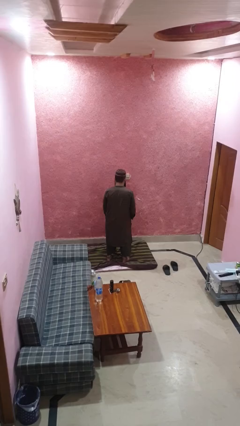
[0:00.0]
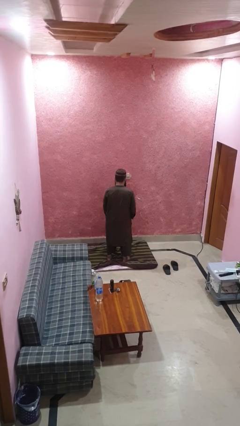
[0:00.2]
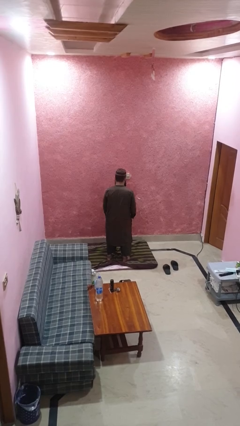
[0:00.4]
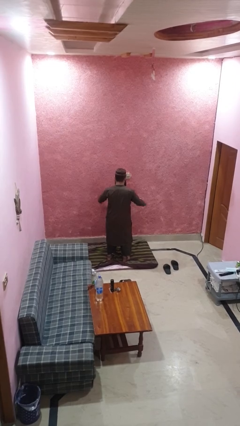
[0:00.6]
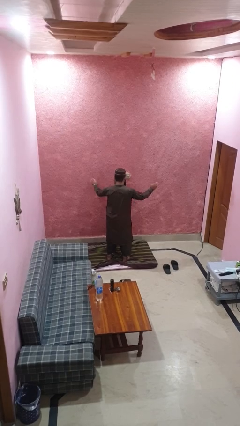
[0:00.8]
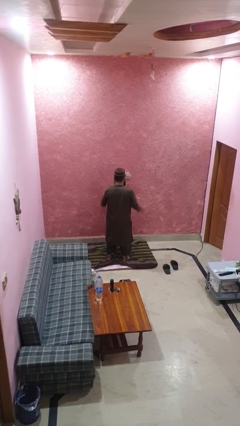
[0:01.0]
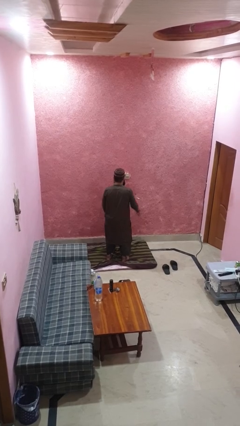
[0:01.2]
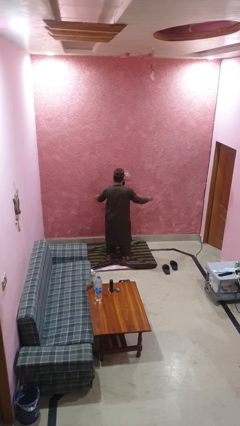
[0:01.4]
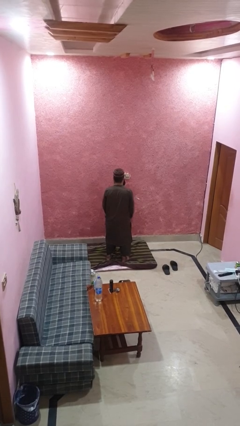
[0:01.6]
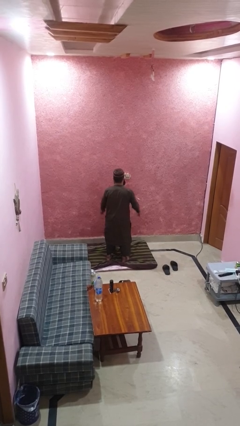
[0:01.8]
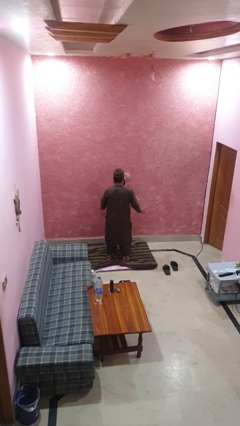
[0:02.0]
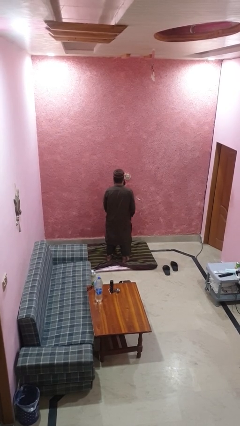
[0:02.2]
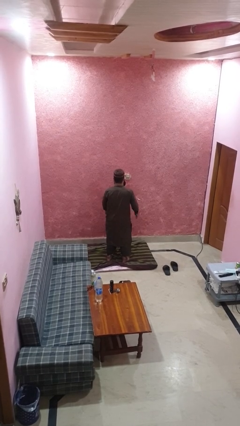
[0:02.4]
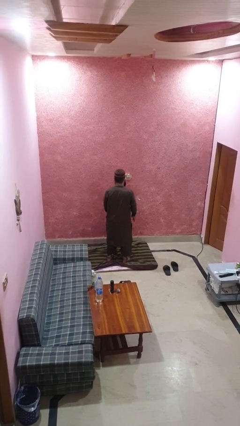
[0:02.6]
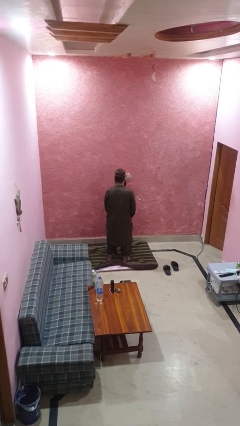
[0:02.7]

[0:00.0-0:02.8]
person slaps hands on thighs

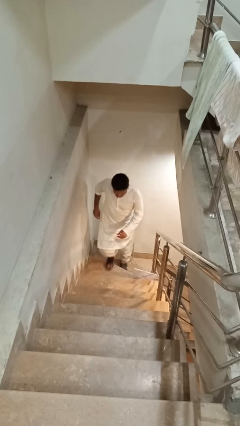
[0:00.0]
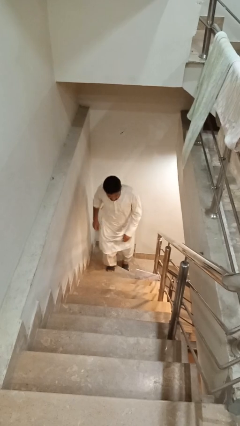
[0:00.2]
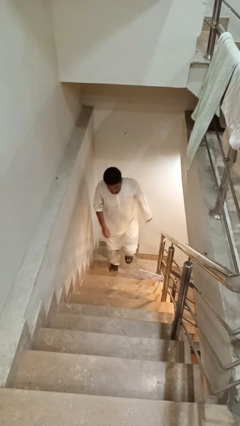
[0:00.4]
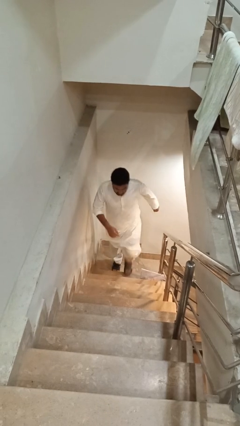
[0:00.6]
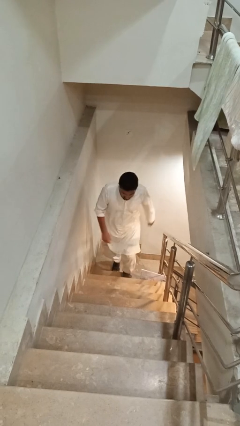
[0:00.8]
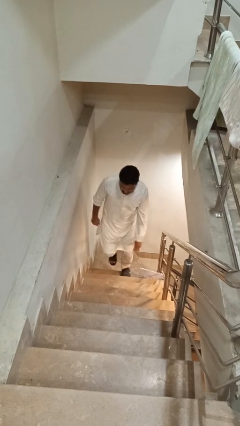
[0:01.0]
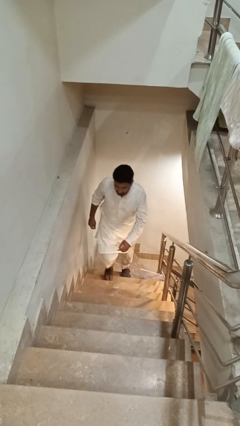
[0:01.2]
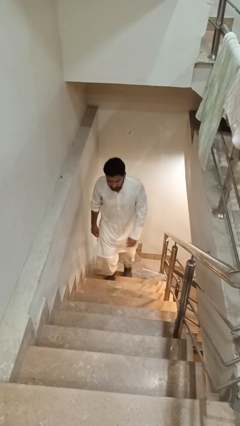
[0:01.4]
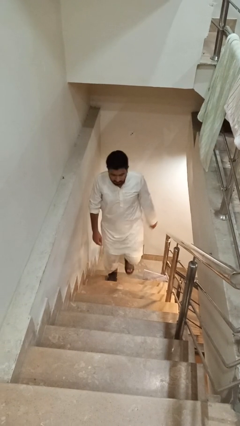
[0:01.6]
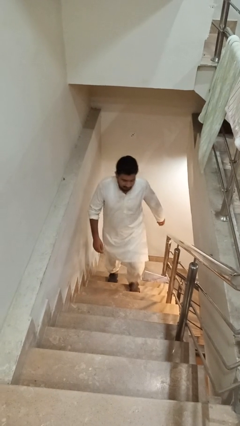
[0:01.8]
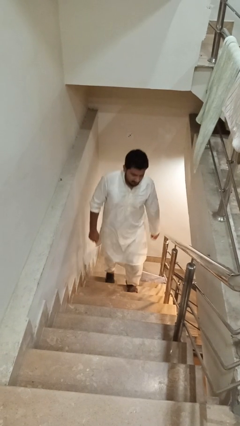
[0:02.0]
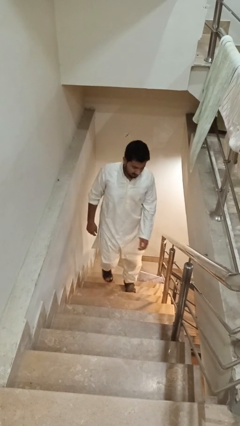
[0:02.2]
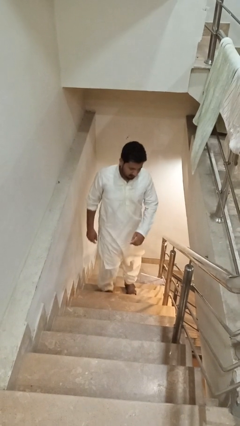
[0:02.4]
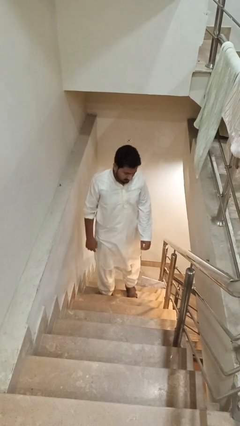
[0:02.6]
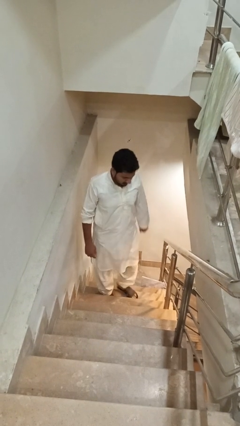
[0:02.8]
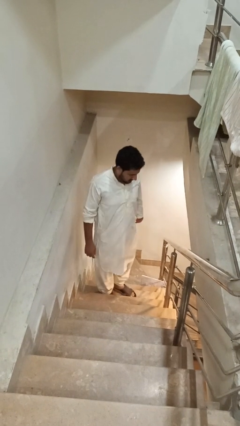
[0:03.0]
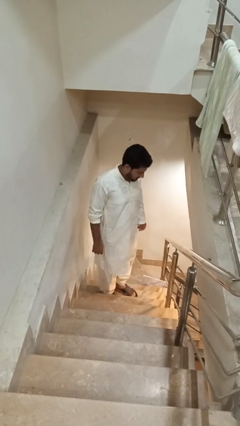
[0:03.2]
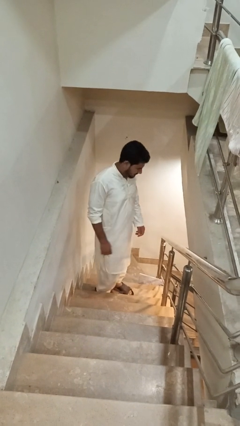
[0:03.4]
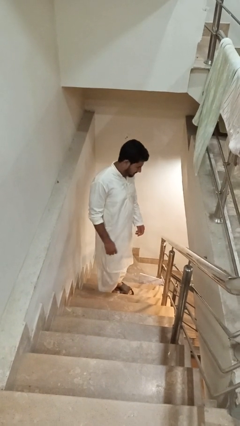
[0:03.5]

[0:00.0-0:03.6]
person climbs up stairs

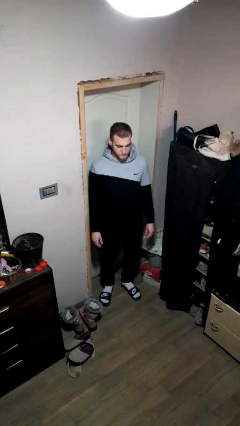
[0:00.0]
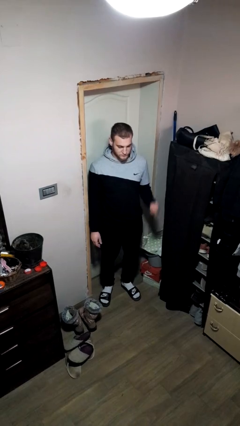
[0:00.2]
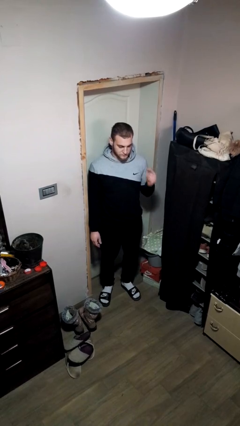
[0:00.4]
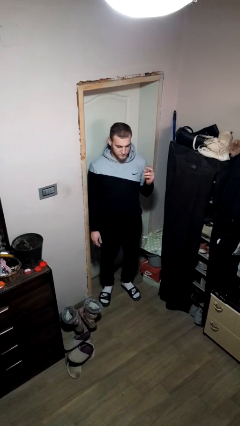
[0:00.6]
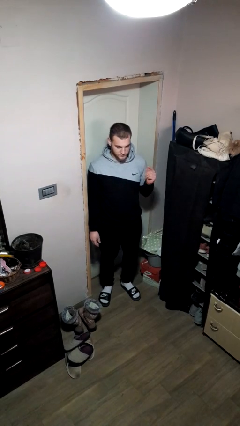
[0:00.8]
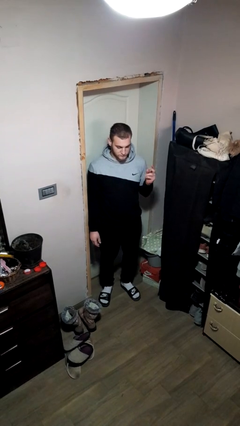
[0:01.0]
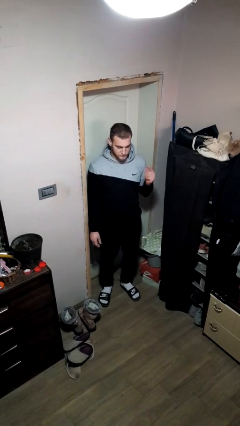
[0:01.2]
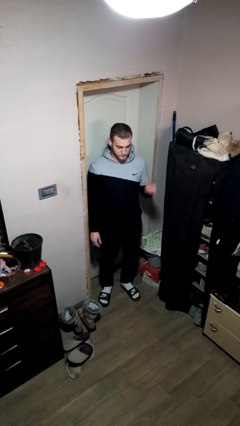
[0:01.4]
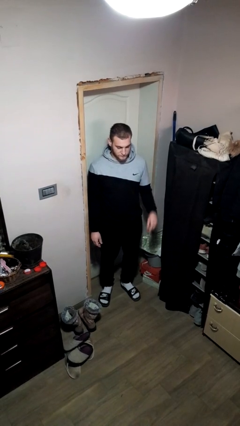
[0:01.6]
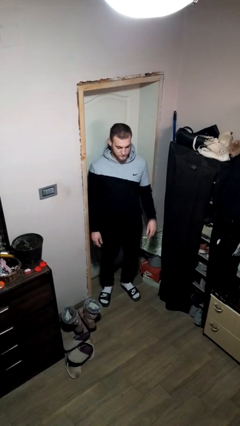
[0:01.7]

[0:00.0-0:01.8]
person snaps fingers

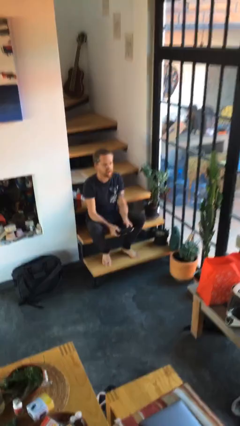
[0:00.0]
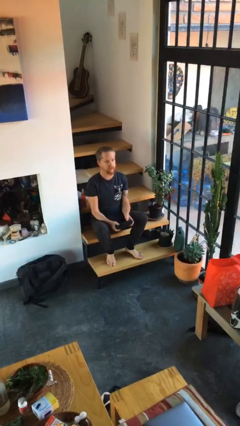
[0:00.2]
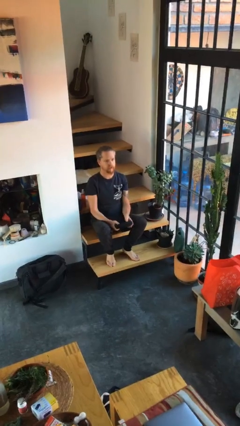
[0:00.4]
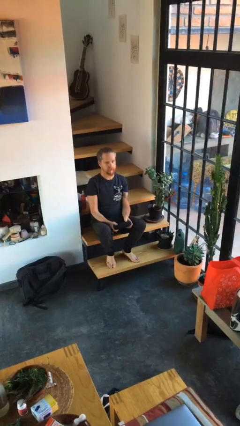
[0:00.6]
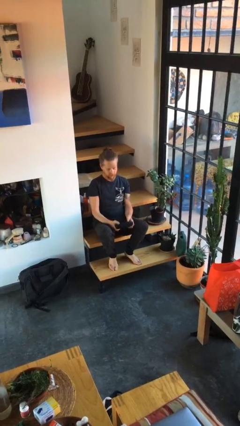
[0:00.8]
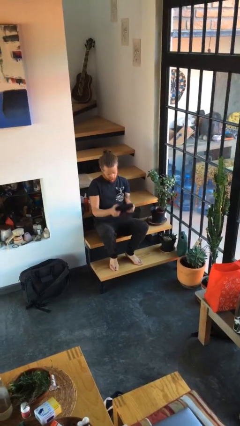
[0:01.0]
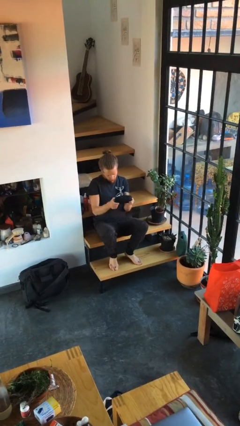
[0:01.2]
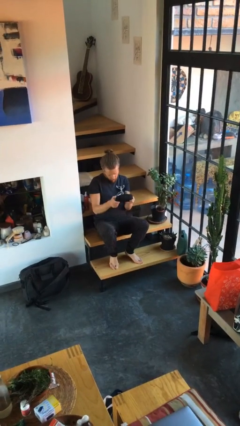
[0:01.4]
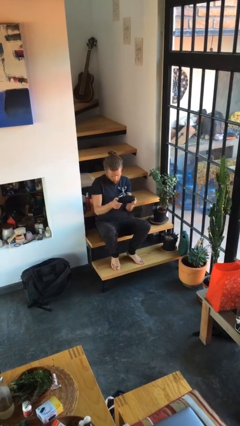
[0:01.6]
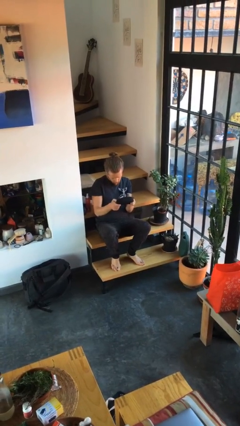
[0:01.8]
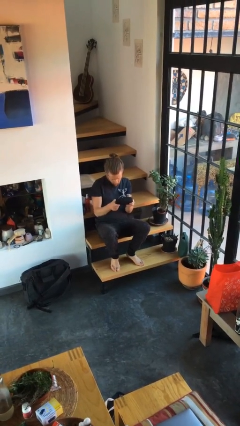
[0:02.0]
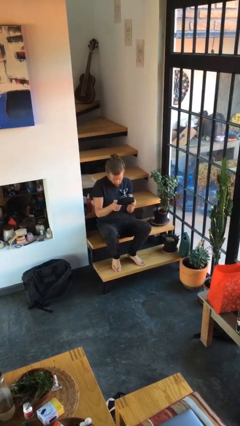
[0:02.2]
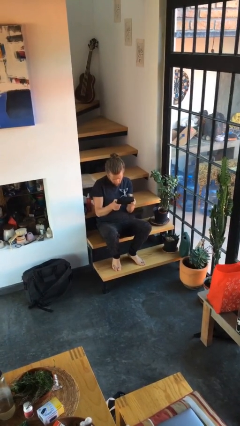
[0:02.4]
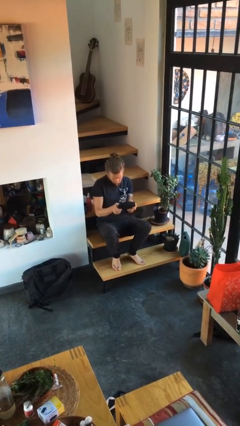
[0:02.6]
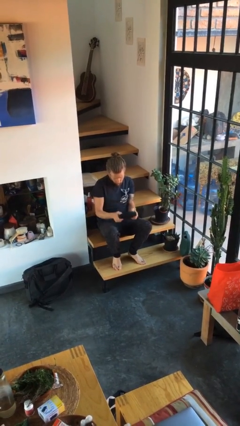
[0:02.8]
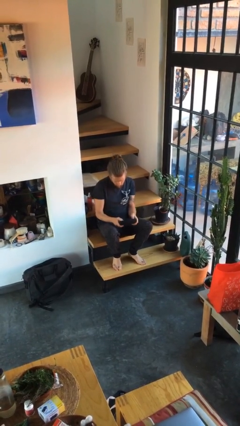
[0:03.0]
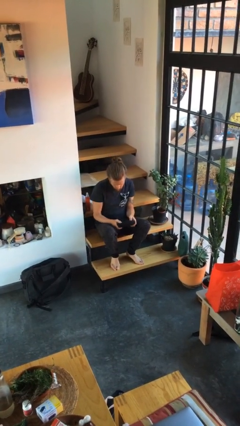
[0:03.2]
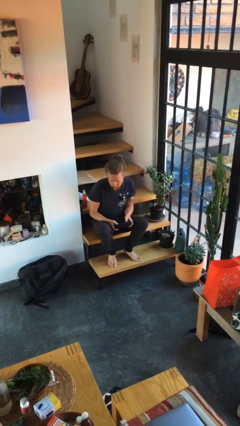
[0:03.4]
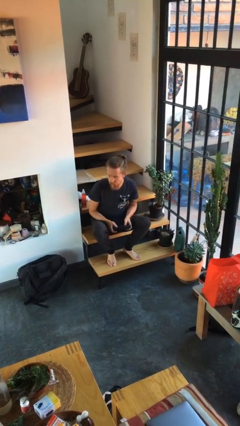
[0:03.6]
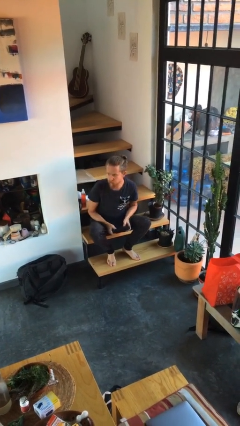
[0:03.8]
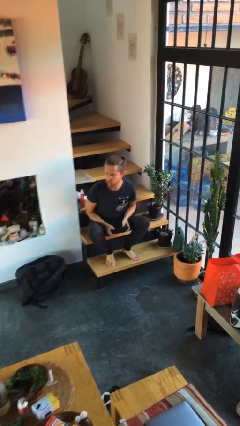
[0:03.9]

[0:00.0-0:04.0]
person interacts with handheld game

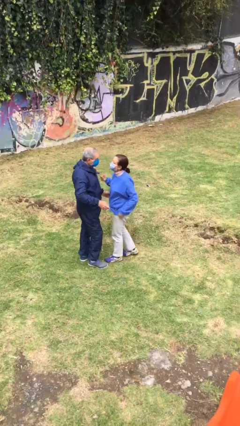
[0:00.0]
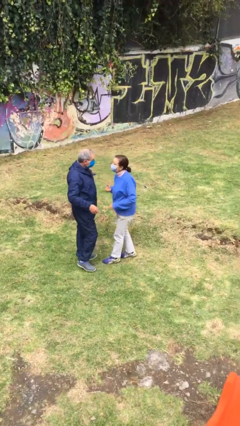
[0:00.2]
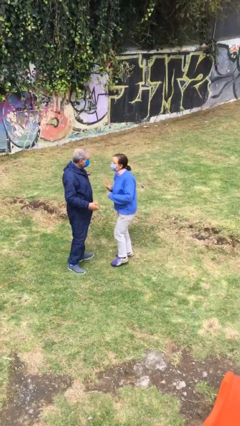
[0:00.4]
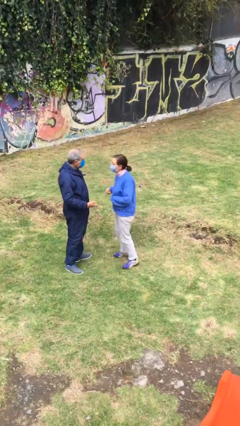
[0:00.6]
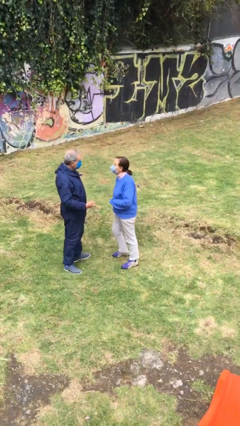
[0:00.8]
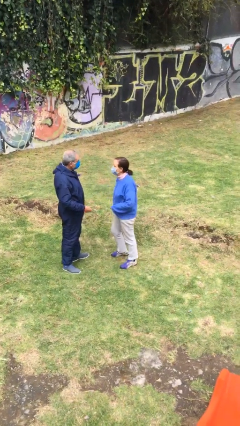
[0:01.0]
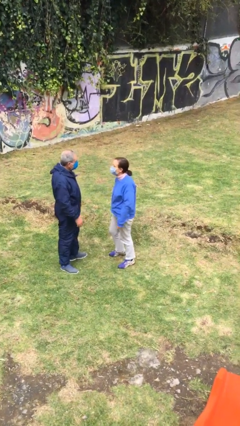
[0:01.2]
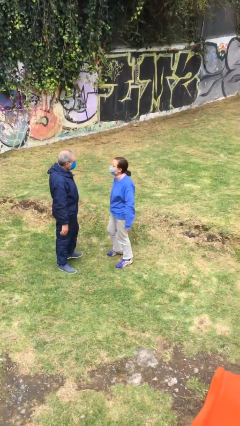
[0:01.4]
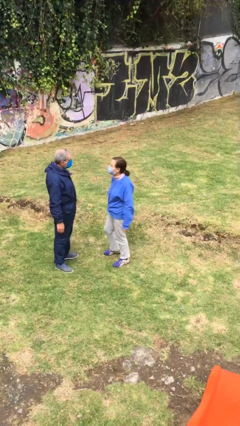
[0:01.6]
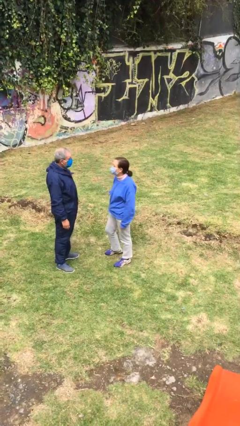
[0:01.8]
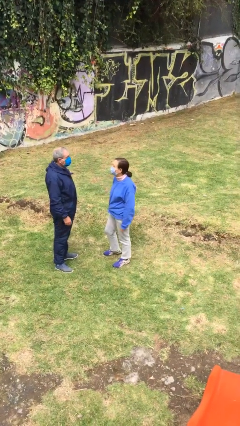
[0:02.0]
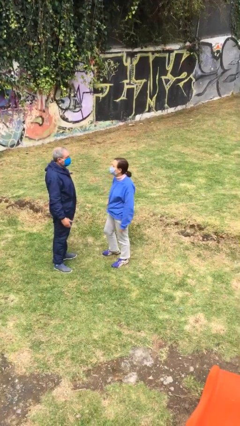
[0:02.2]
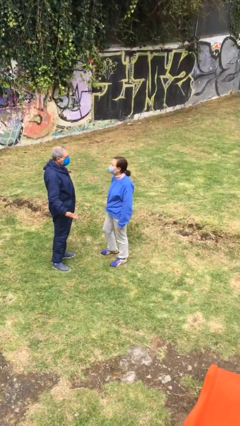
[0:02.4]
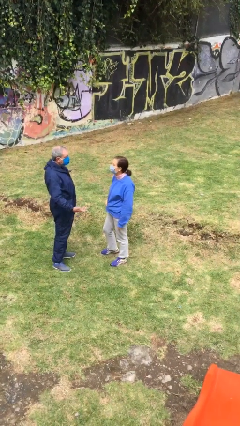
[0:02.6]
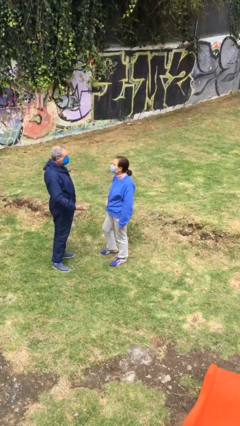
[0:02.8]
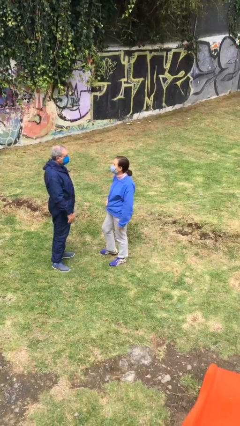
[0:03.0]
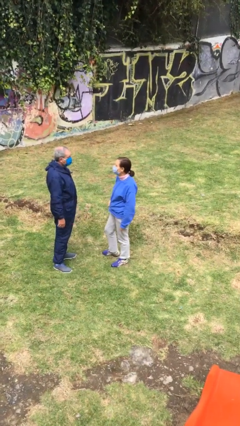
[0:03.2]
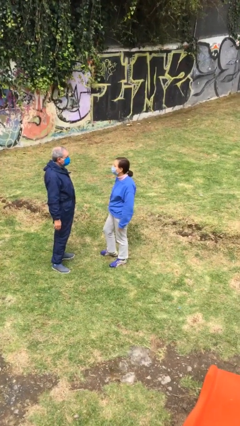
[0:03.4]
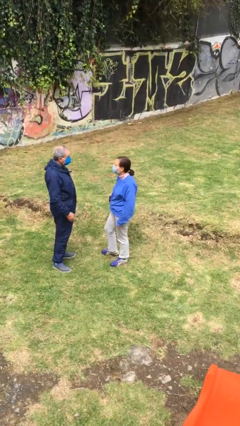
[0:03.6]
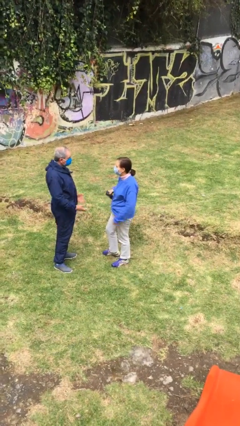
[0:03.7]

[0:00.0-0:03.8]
person talks to person

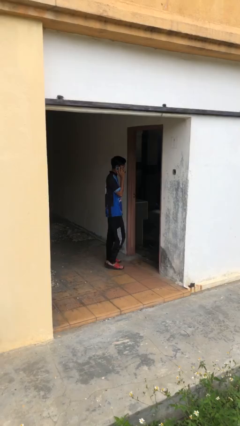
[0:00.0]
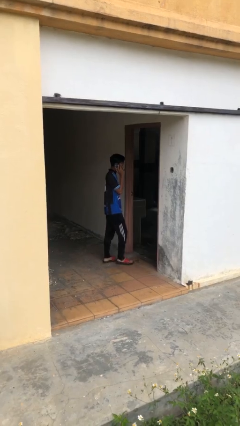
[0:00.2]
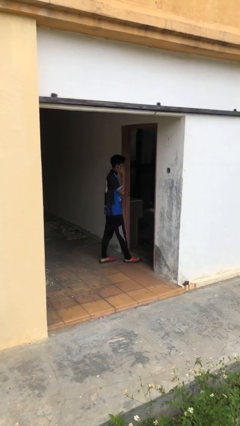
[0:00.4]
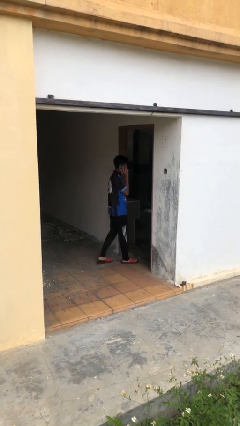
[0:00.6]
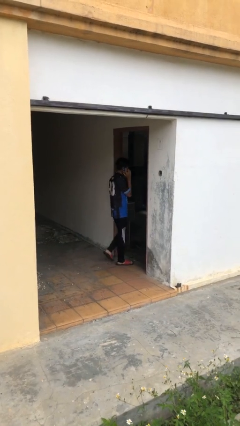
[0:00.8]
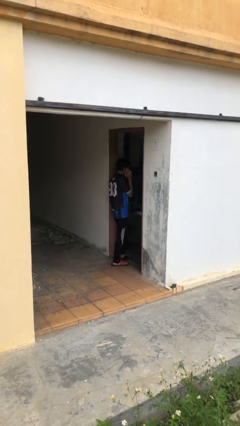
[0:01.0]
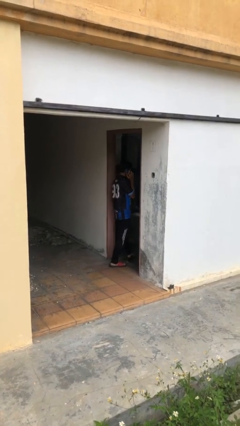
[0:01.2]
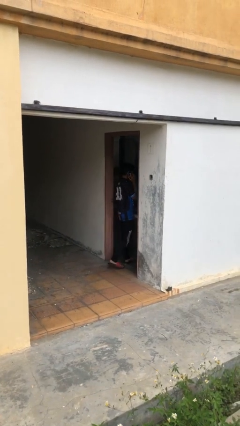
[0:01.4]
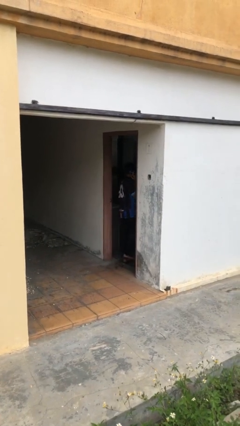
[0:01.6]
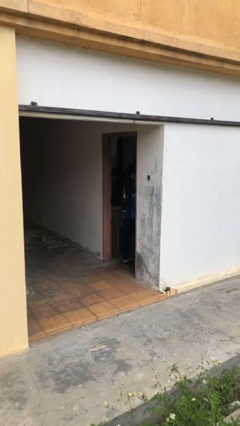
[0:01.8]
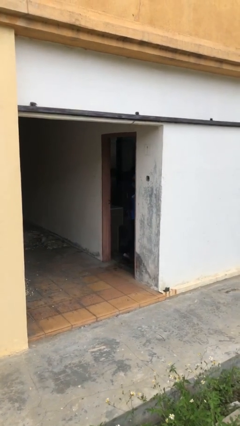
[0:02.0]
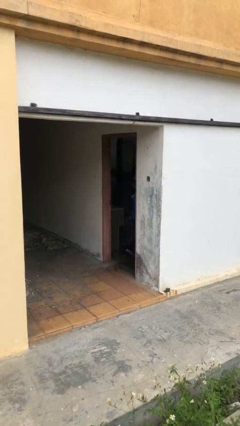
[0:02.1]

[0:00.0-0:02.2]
person exits scene through structure
